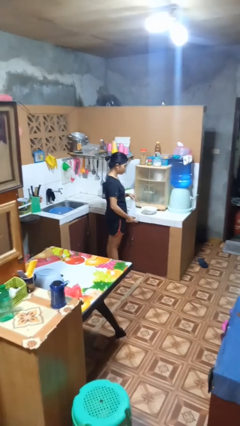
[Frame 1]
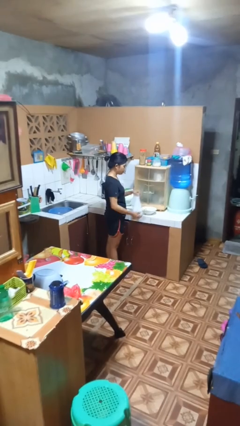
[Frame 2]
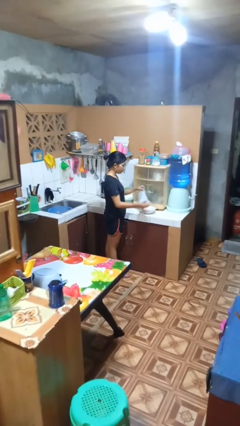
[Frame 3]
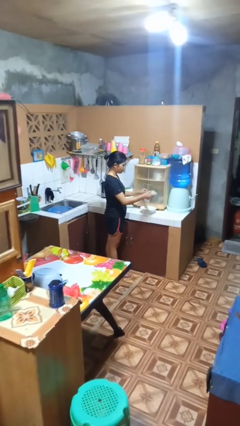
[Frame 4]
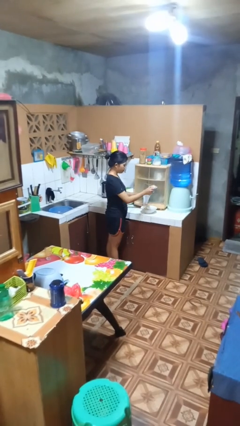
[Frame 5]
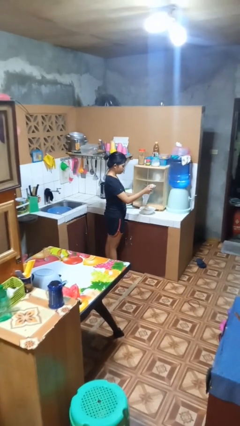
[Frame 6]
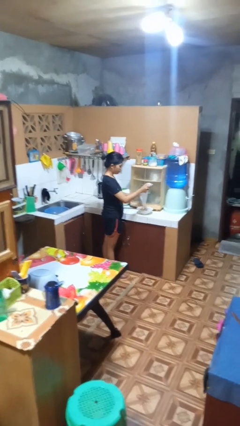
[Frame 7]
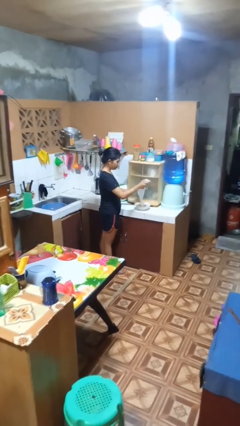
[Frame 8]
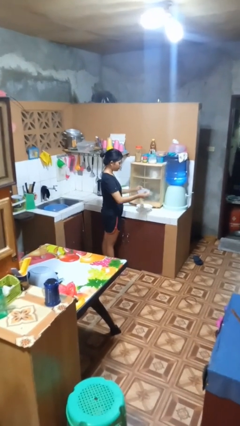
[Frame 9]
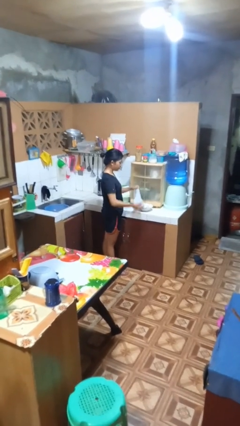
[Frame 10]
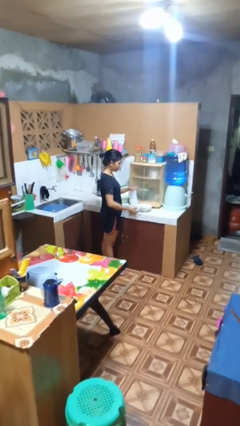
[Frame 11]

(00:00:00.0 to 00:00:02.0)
person pours into bowl

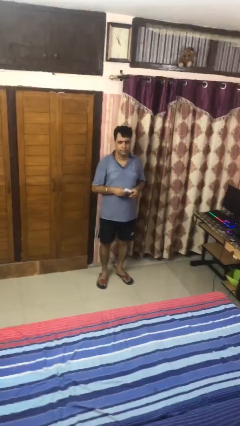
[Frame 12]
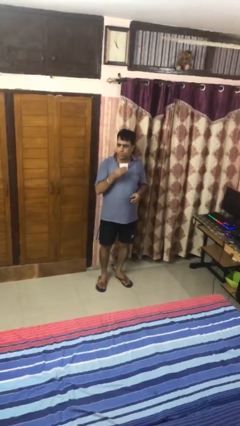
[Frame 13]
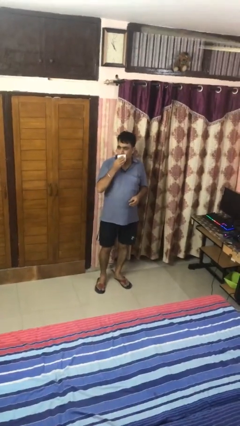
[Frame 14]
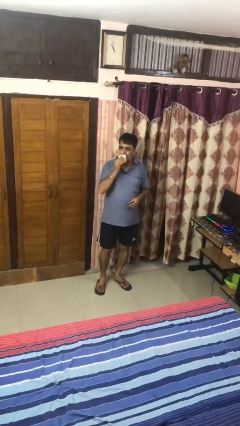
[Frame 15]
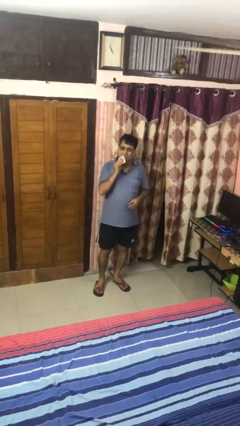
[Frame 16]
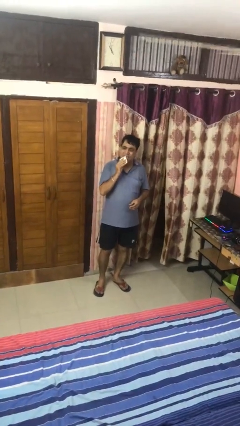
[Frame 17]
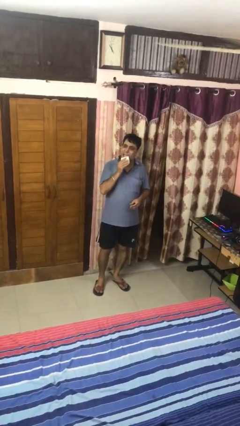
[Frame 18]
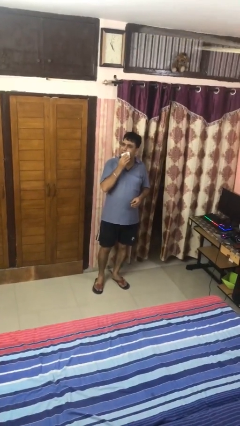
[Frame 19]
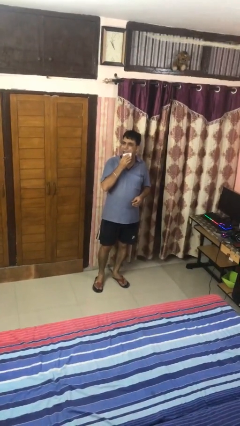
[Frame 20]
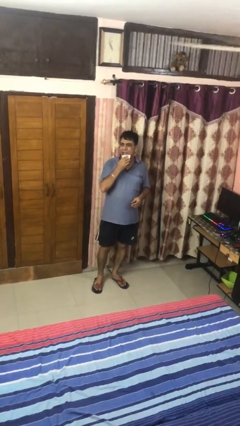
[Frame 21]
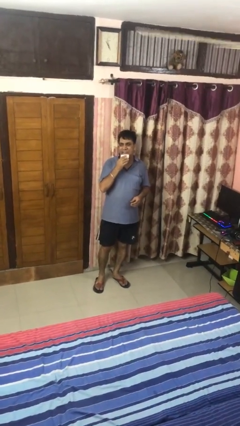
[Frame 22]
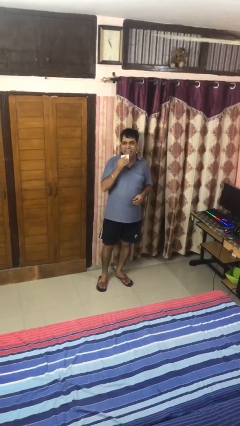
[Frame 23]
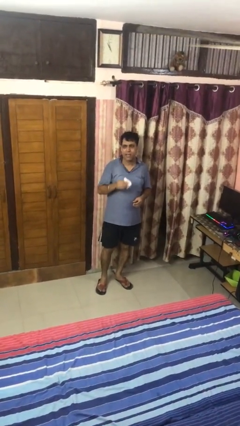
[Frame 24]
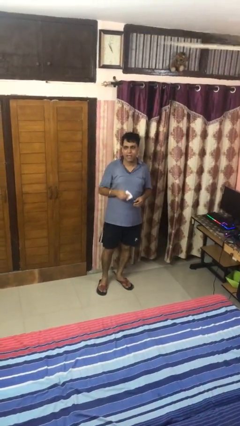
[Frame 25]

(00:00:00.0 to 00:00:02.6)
person wipes mouth with napkin

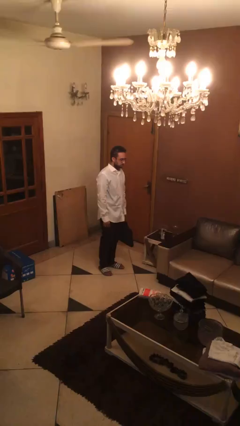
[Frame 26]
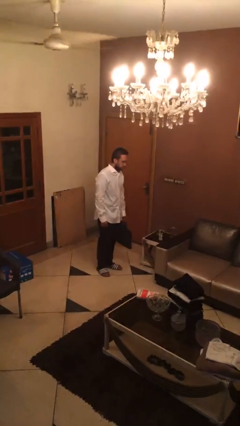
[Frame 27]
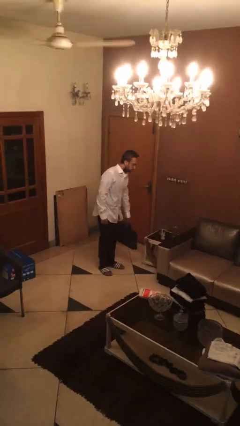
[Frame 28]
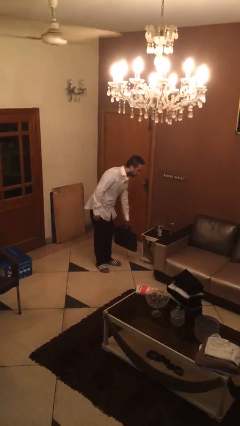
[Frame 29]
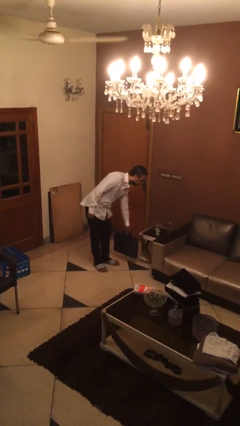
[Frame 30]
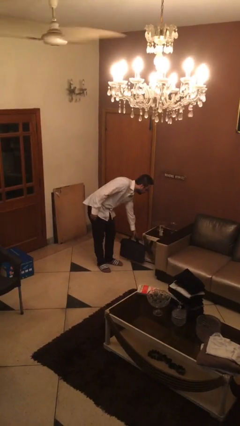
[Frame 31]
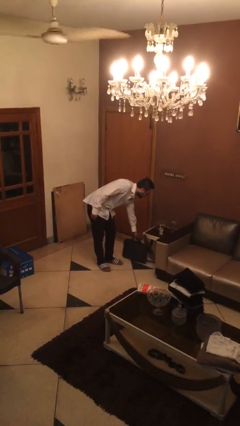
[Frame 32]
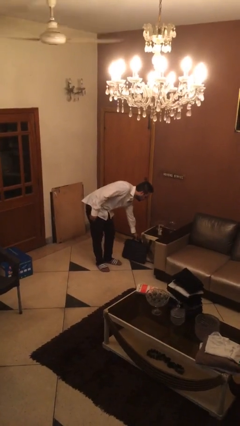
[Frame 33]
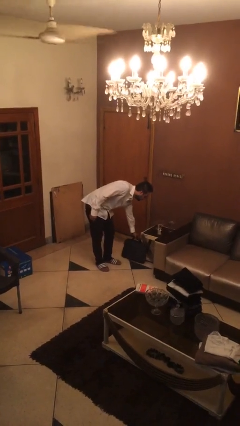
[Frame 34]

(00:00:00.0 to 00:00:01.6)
person puts down object on floor

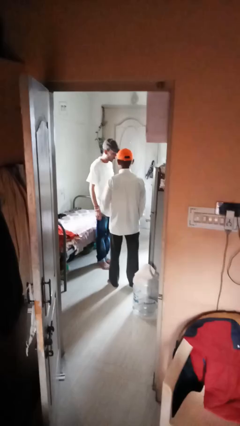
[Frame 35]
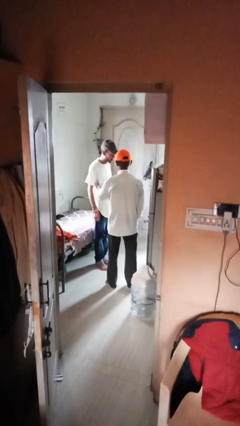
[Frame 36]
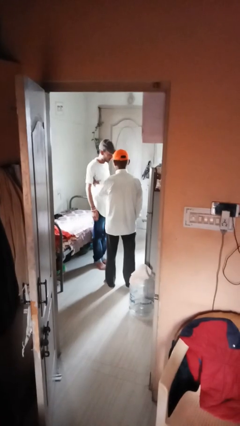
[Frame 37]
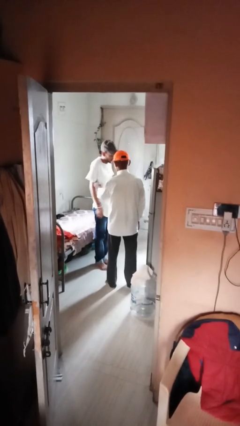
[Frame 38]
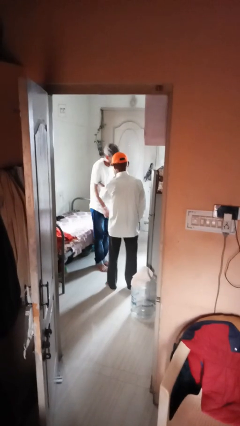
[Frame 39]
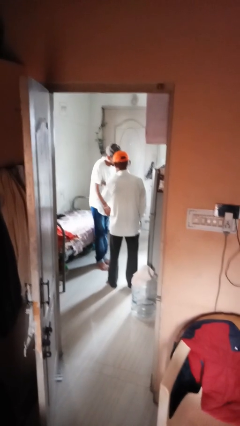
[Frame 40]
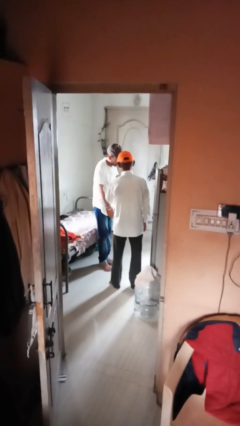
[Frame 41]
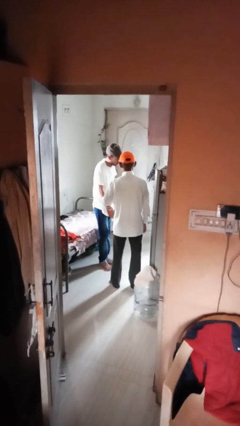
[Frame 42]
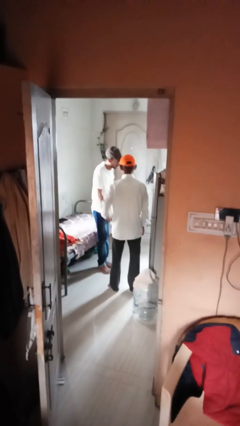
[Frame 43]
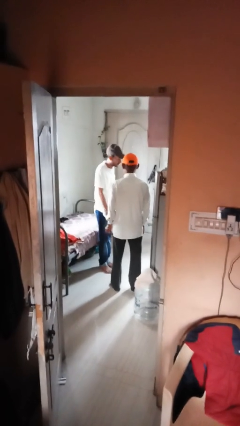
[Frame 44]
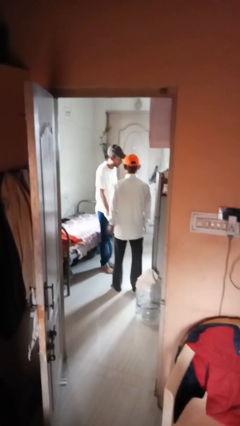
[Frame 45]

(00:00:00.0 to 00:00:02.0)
person tickles person

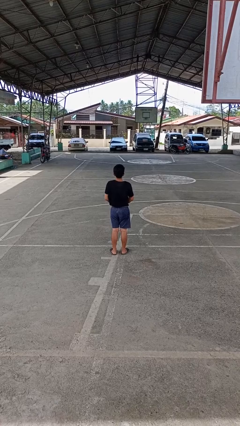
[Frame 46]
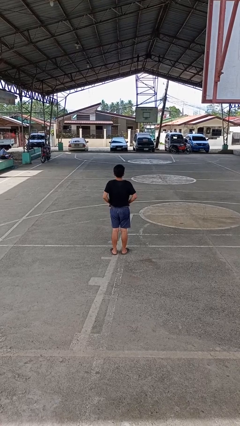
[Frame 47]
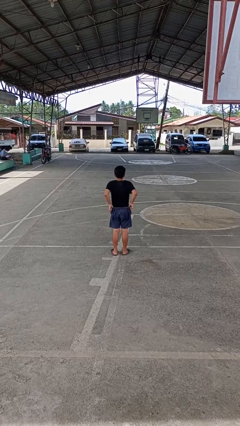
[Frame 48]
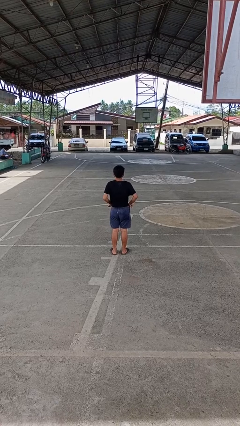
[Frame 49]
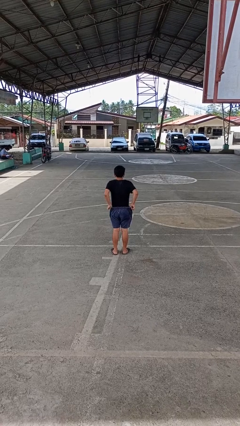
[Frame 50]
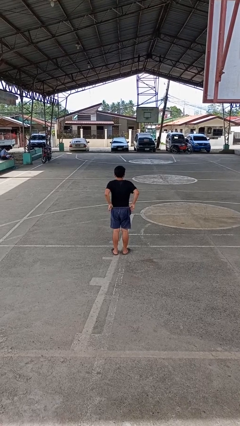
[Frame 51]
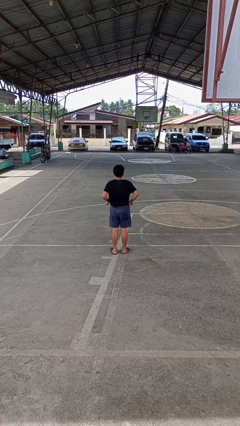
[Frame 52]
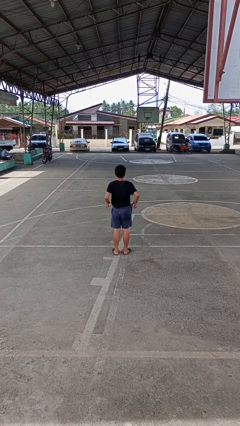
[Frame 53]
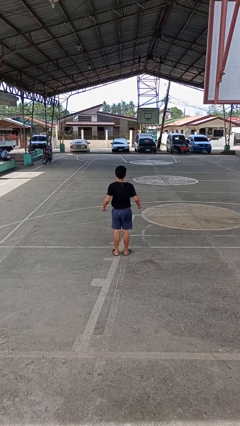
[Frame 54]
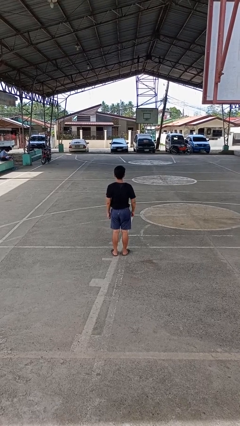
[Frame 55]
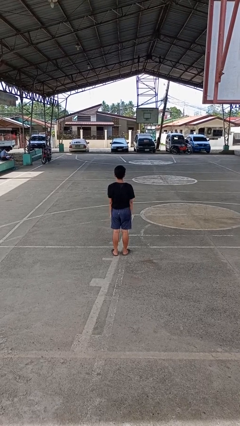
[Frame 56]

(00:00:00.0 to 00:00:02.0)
person hikes up pants

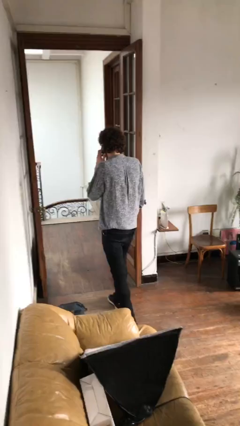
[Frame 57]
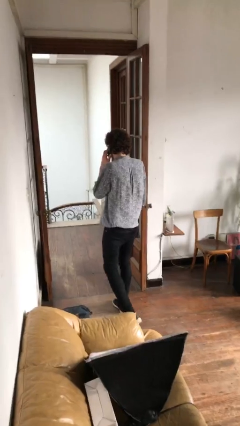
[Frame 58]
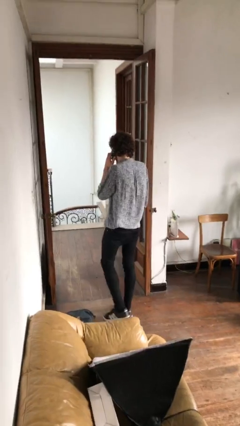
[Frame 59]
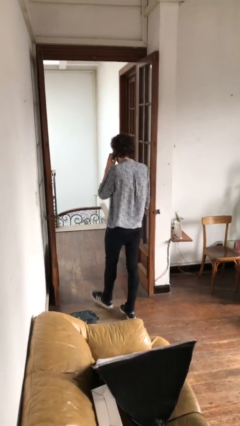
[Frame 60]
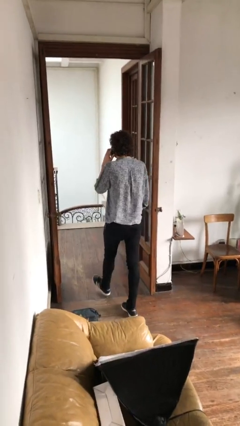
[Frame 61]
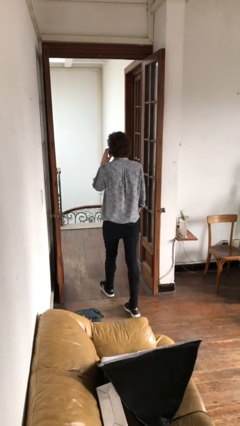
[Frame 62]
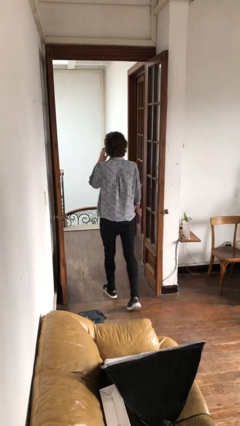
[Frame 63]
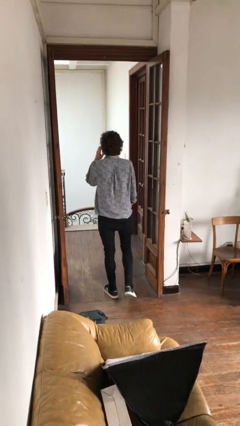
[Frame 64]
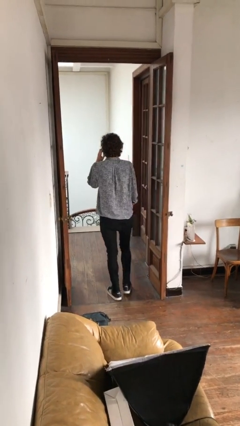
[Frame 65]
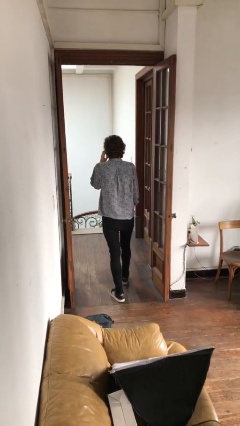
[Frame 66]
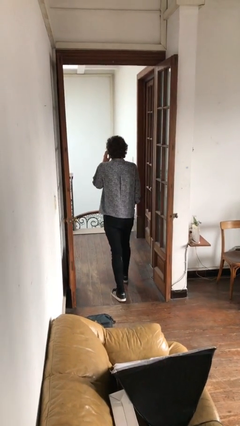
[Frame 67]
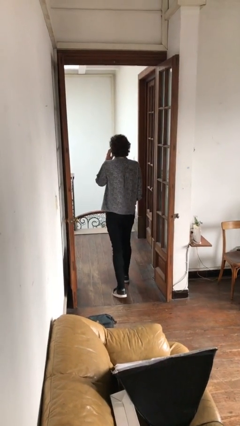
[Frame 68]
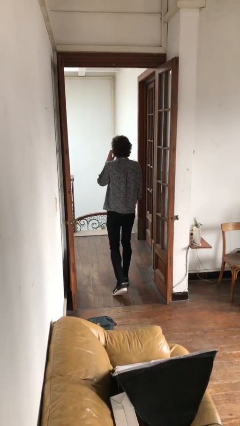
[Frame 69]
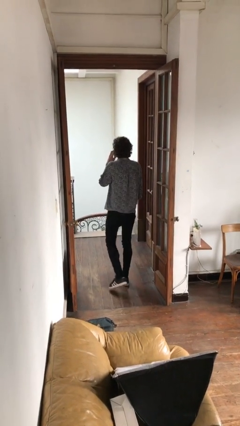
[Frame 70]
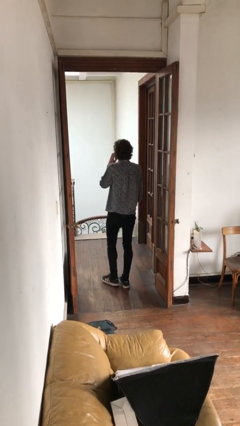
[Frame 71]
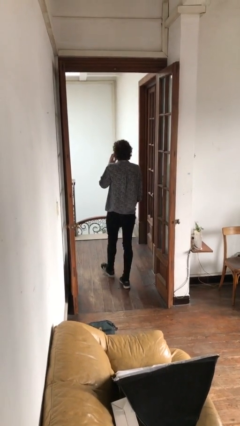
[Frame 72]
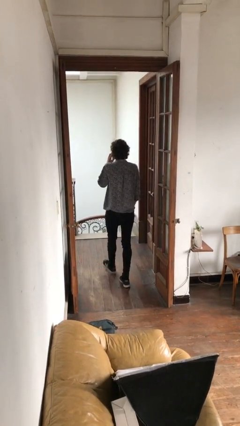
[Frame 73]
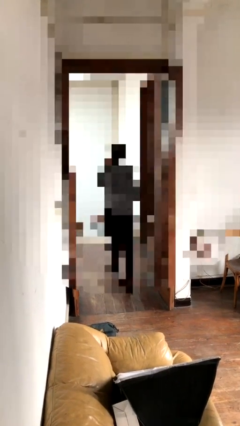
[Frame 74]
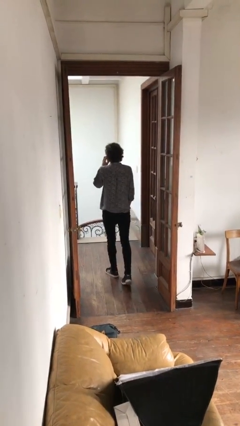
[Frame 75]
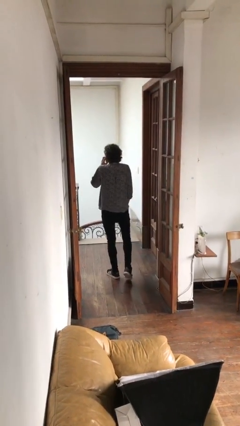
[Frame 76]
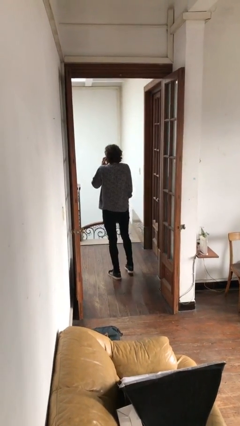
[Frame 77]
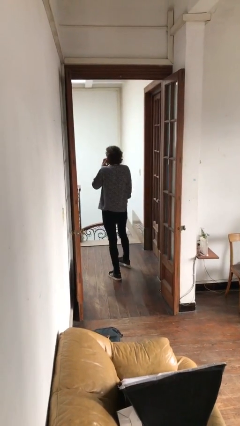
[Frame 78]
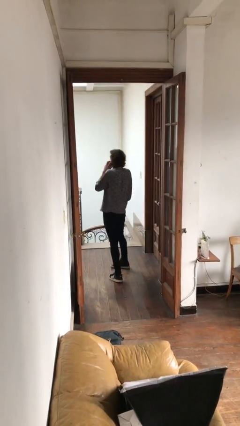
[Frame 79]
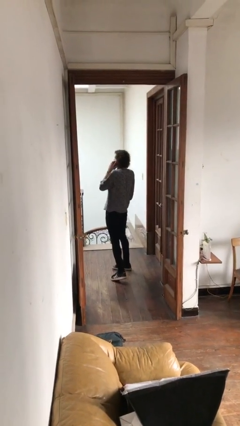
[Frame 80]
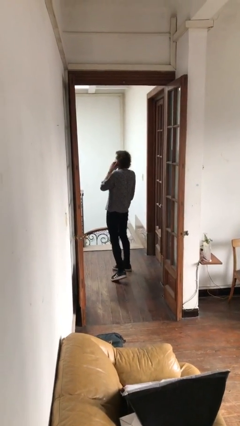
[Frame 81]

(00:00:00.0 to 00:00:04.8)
person exits scene through structure

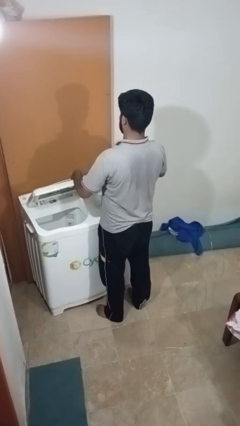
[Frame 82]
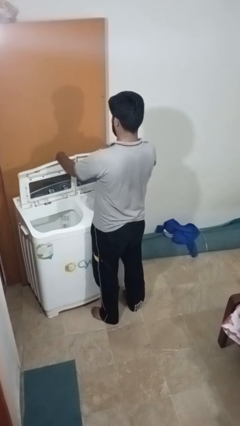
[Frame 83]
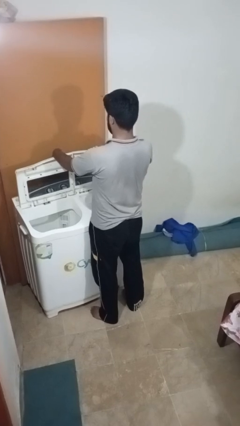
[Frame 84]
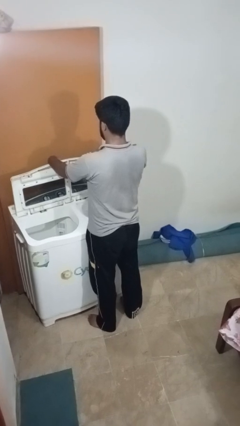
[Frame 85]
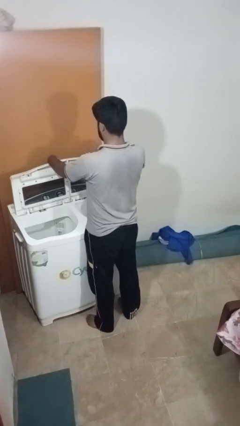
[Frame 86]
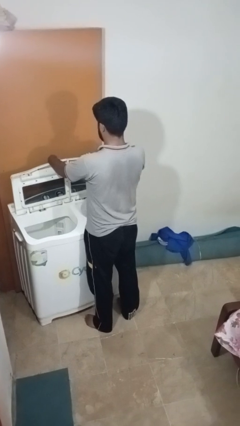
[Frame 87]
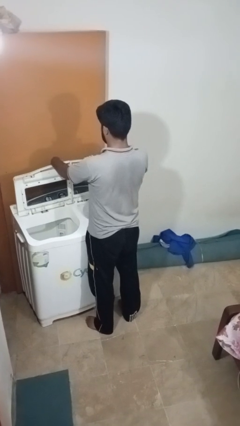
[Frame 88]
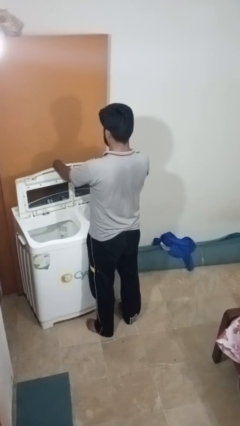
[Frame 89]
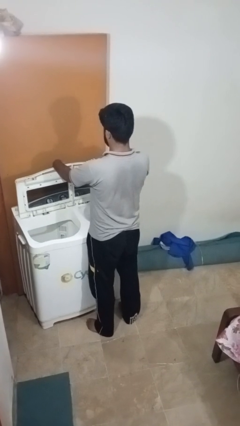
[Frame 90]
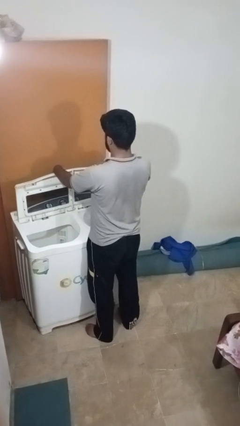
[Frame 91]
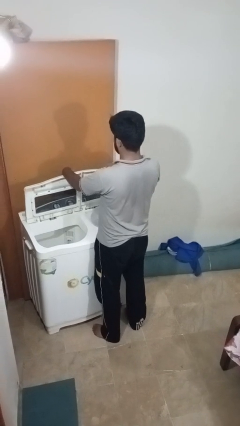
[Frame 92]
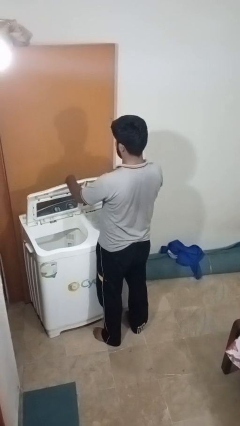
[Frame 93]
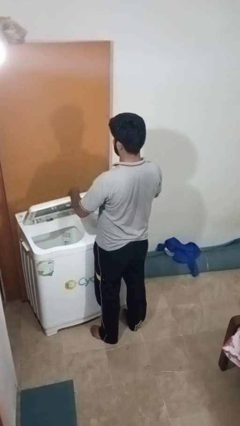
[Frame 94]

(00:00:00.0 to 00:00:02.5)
person opens clothes washer
